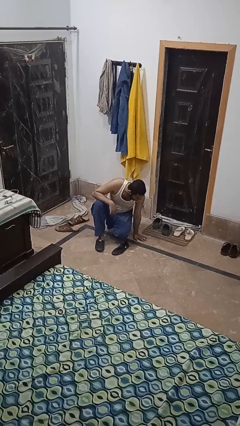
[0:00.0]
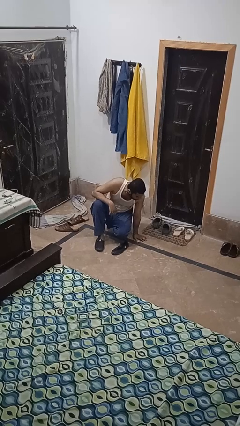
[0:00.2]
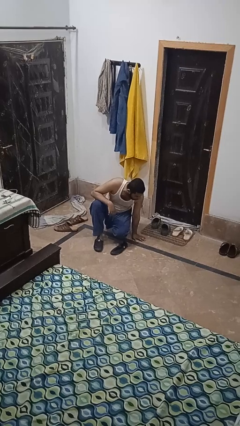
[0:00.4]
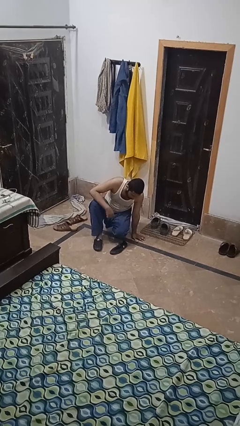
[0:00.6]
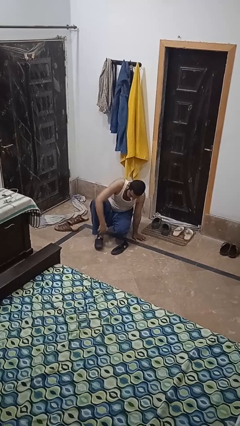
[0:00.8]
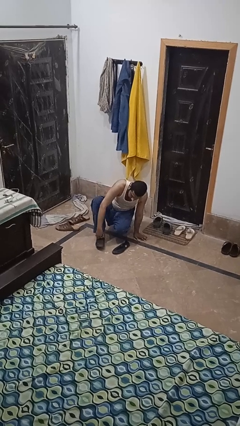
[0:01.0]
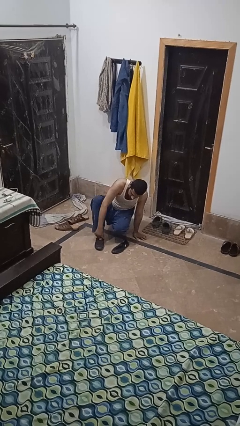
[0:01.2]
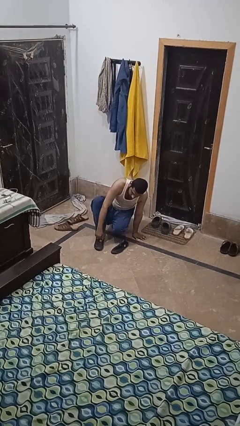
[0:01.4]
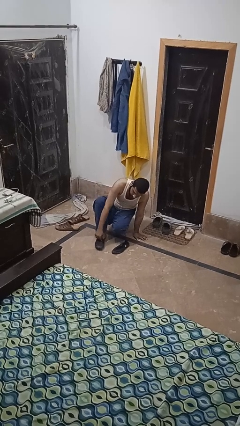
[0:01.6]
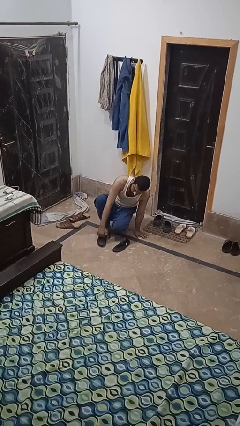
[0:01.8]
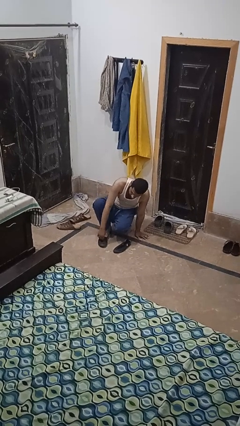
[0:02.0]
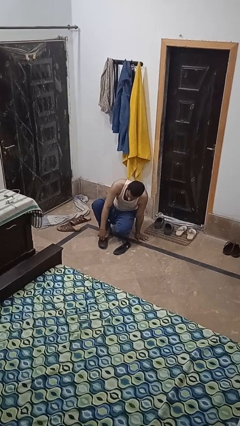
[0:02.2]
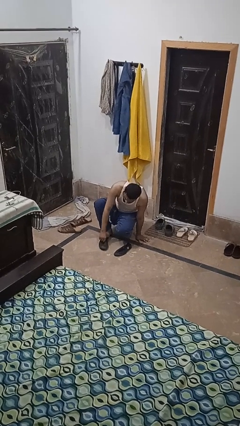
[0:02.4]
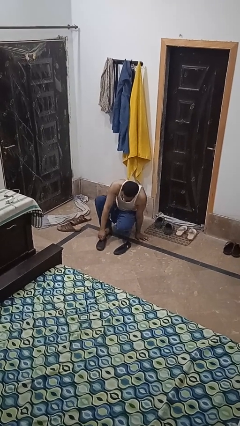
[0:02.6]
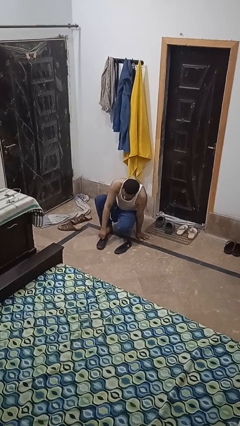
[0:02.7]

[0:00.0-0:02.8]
person takes off shoes

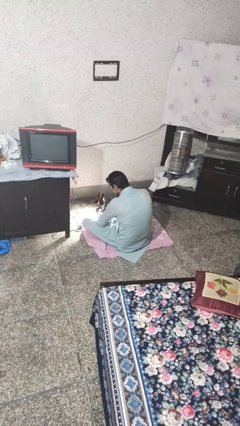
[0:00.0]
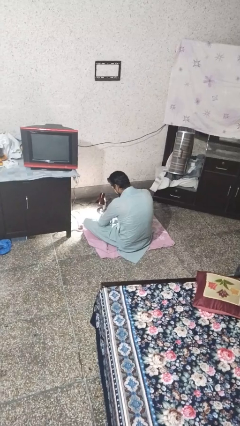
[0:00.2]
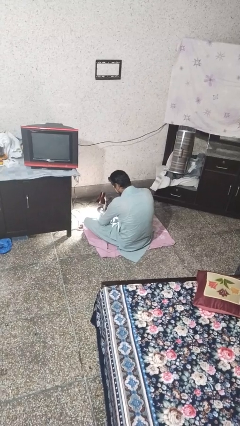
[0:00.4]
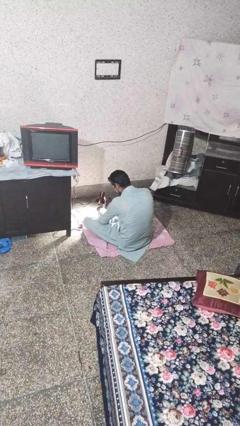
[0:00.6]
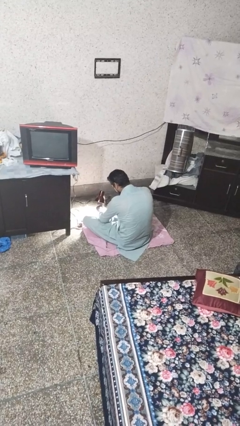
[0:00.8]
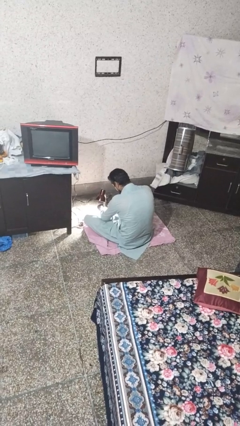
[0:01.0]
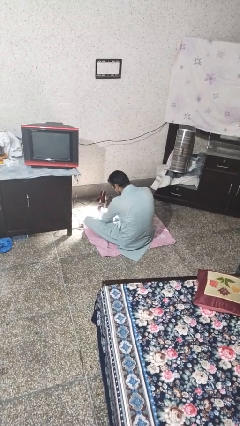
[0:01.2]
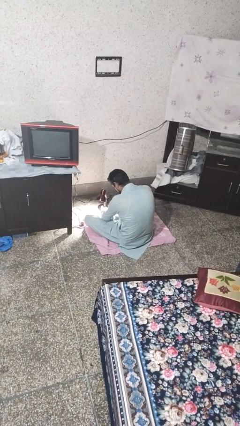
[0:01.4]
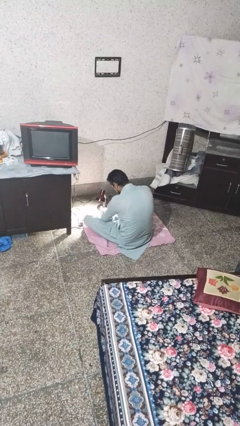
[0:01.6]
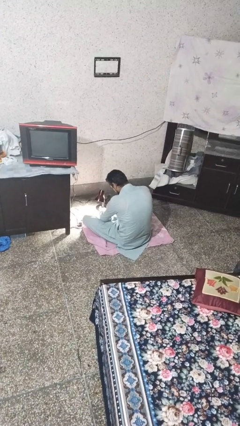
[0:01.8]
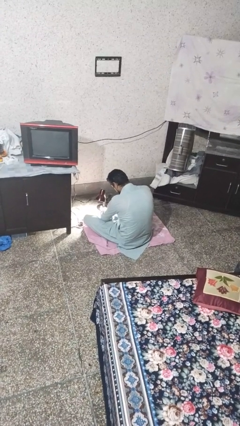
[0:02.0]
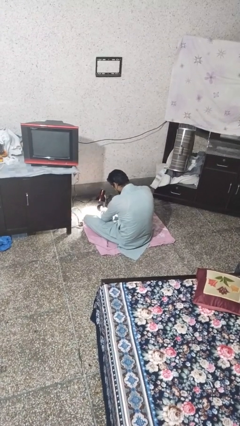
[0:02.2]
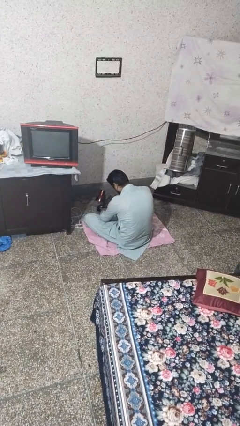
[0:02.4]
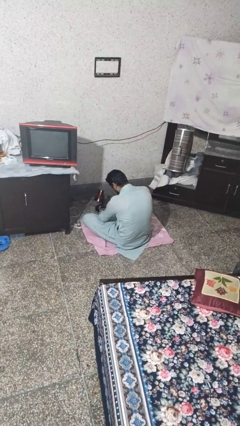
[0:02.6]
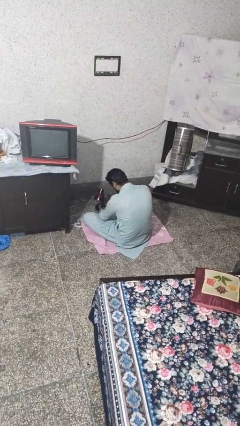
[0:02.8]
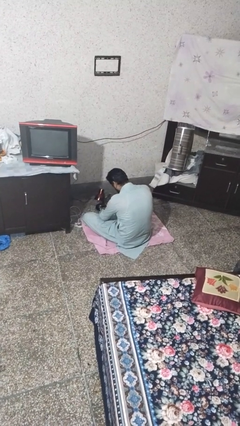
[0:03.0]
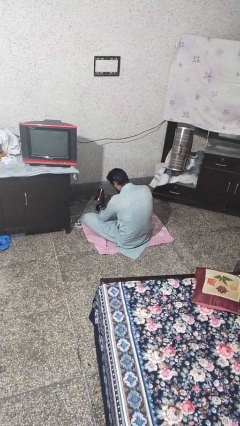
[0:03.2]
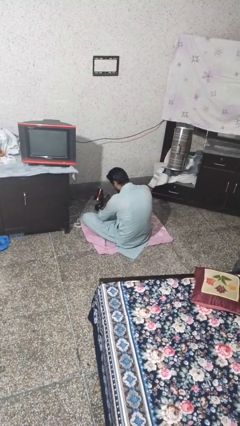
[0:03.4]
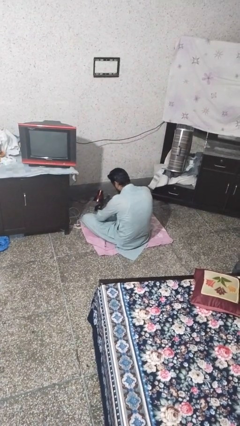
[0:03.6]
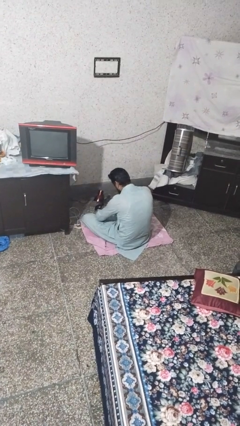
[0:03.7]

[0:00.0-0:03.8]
person turns off lamp

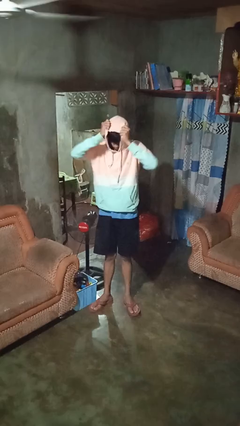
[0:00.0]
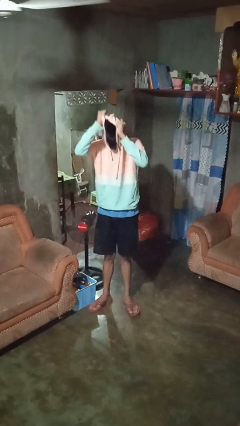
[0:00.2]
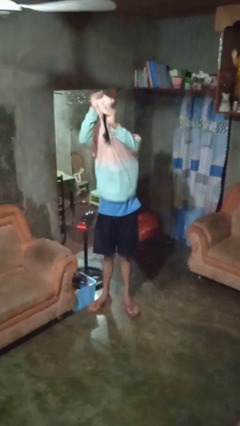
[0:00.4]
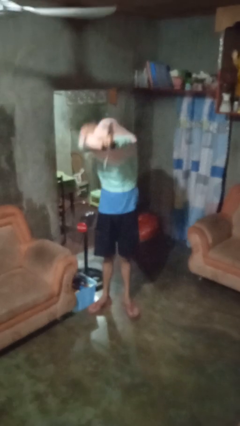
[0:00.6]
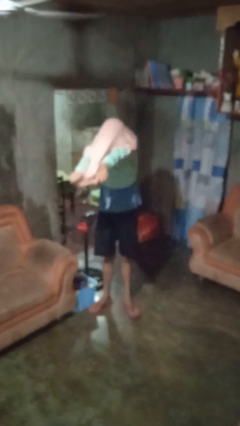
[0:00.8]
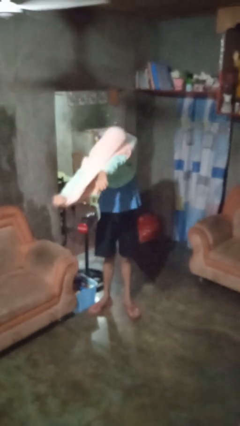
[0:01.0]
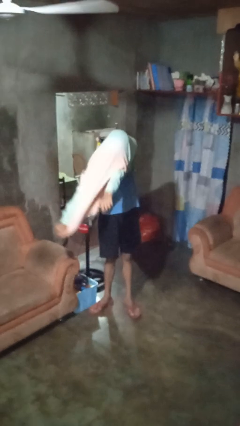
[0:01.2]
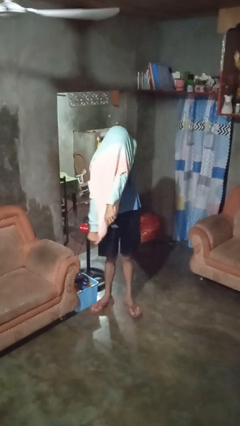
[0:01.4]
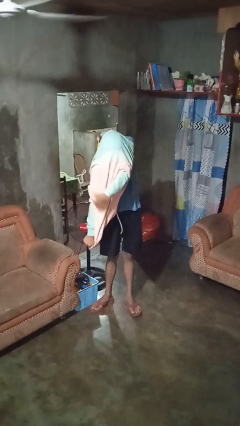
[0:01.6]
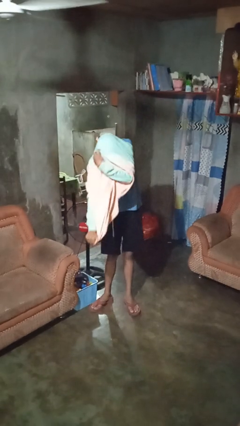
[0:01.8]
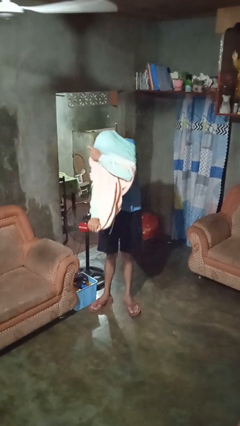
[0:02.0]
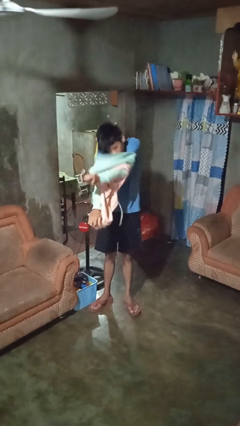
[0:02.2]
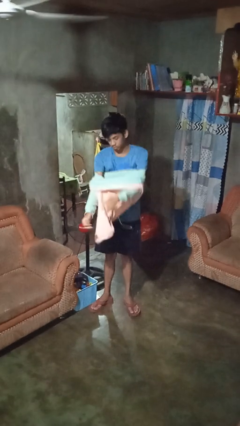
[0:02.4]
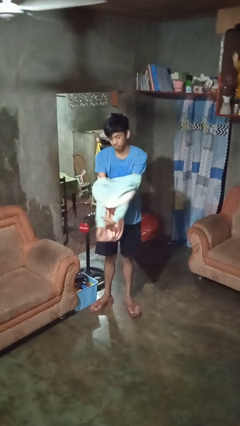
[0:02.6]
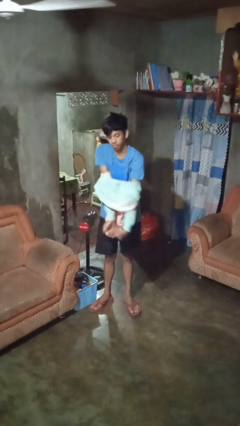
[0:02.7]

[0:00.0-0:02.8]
person takes off hoodie

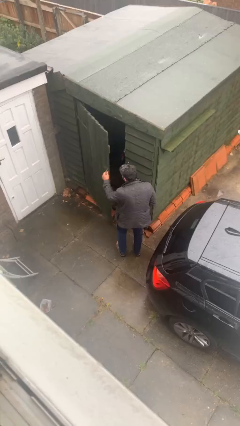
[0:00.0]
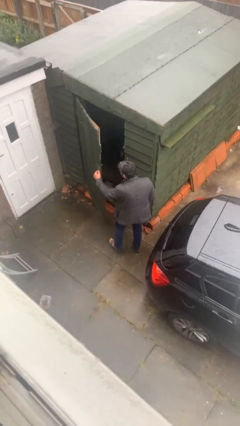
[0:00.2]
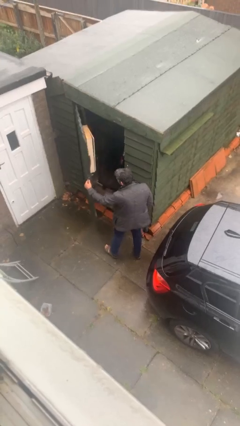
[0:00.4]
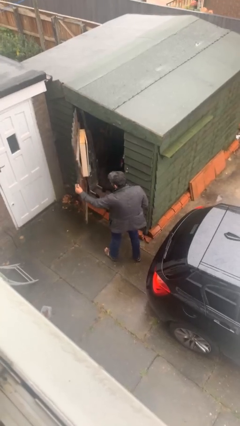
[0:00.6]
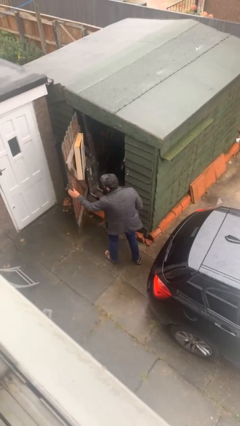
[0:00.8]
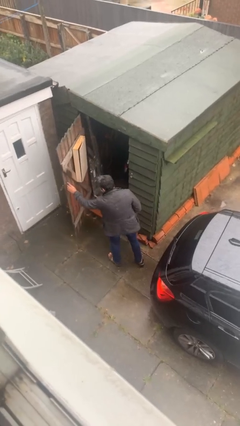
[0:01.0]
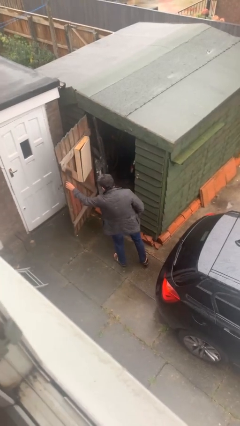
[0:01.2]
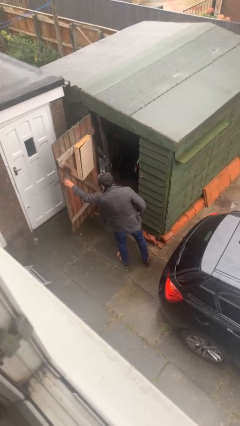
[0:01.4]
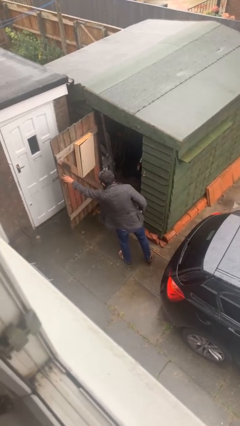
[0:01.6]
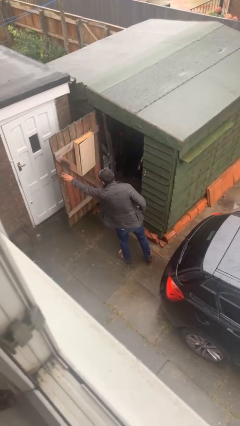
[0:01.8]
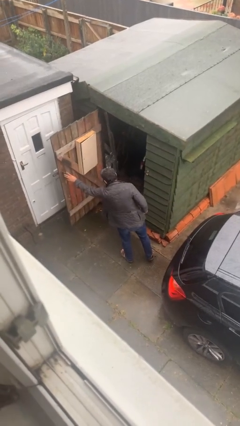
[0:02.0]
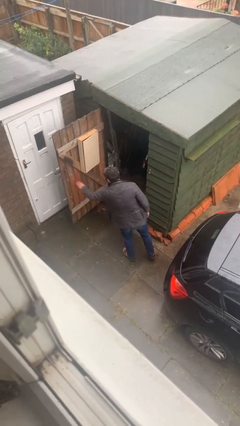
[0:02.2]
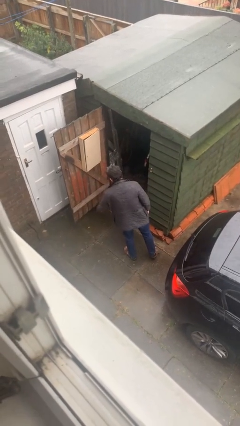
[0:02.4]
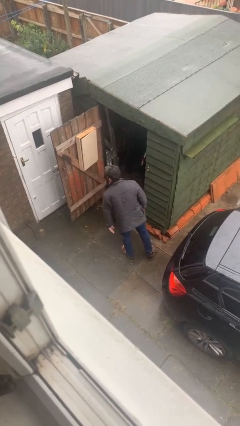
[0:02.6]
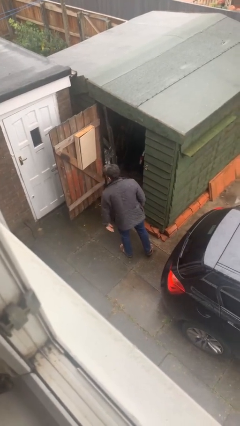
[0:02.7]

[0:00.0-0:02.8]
person opens facility door

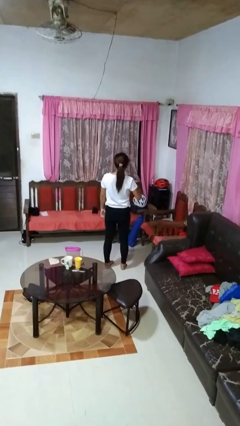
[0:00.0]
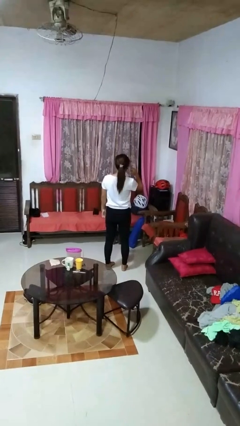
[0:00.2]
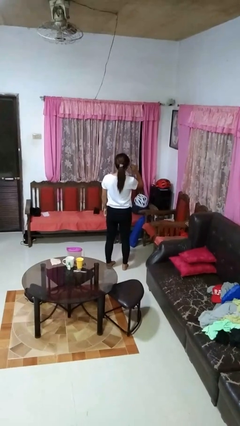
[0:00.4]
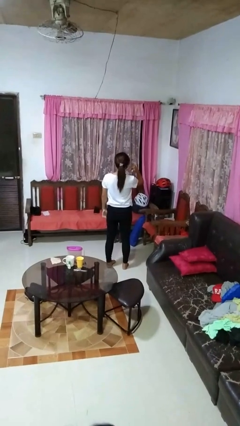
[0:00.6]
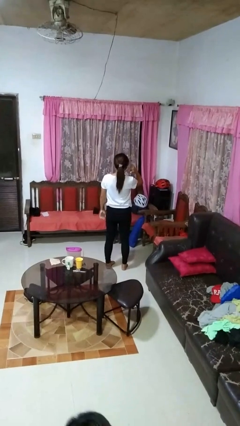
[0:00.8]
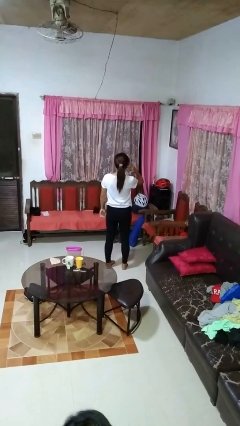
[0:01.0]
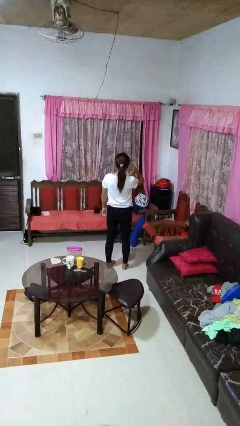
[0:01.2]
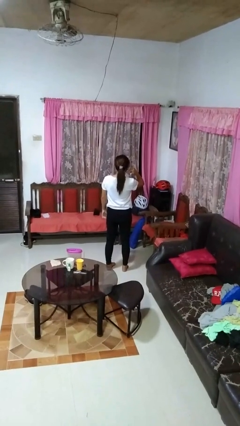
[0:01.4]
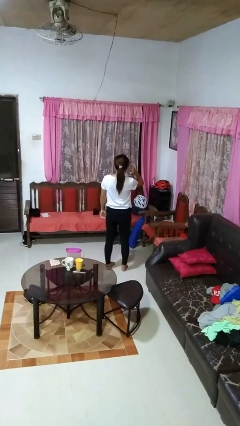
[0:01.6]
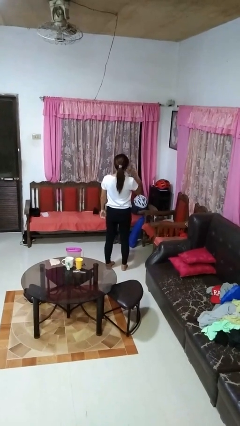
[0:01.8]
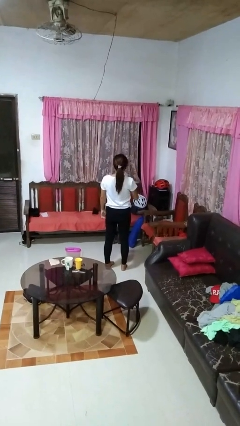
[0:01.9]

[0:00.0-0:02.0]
person gestures behind me

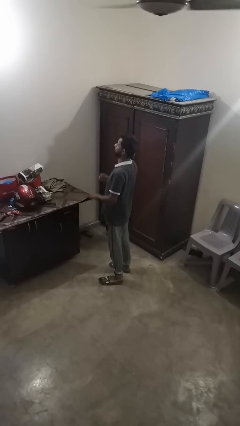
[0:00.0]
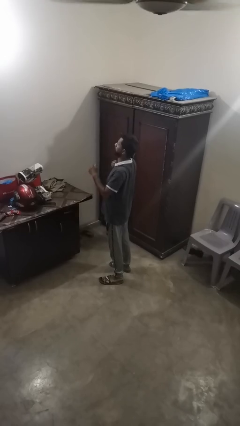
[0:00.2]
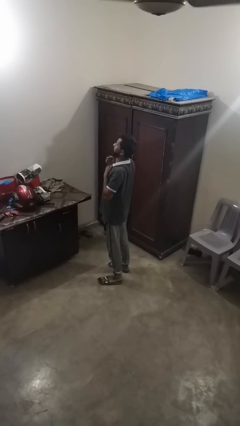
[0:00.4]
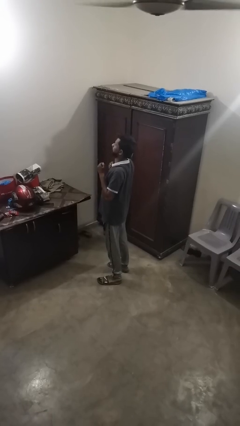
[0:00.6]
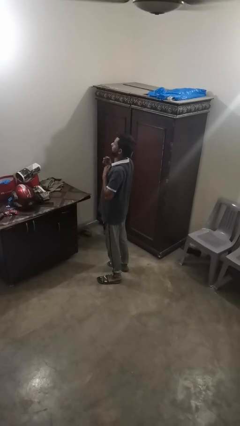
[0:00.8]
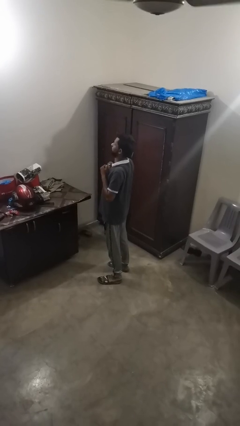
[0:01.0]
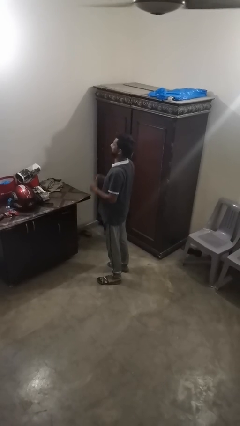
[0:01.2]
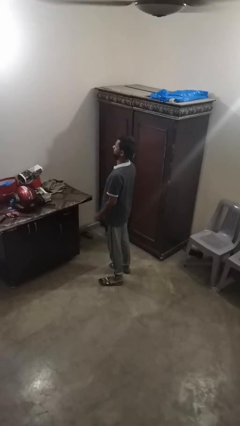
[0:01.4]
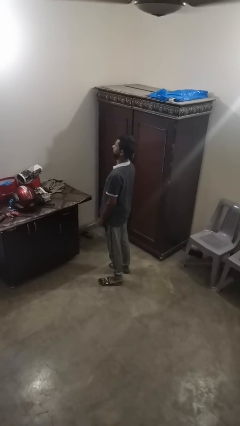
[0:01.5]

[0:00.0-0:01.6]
person drums on chest

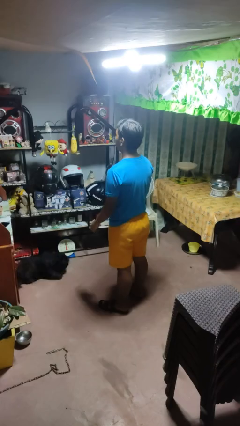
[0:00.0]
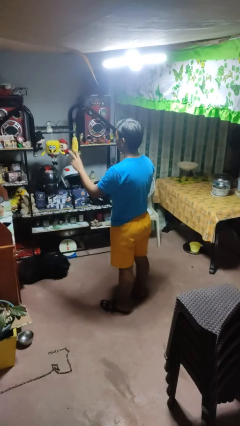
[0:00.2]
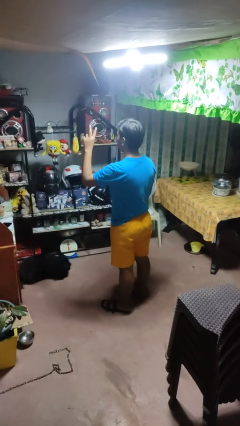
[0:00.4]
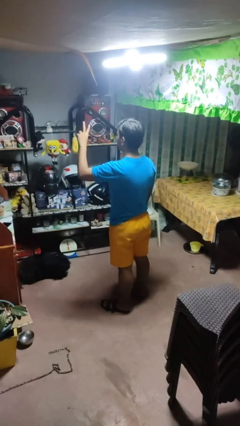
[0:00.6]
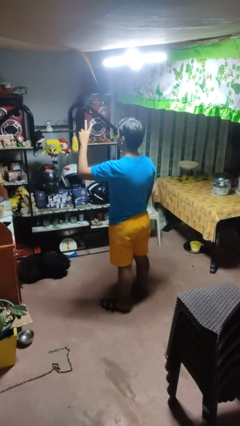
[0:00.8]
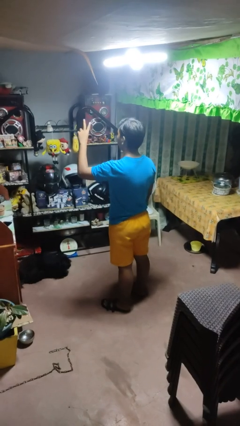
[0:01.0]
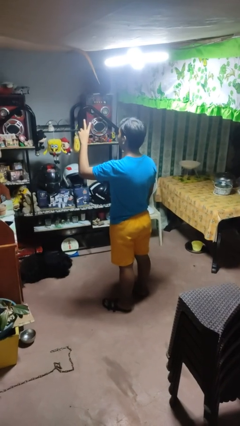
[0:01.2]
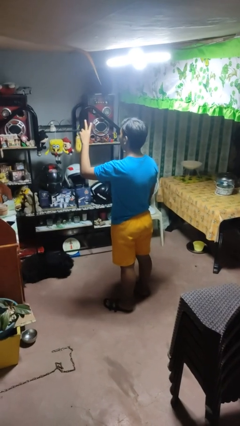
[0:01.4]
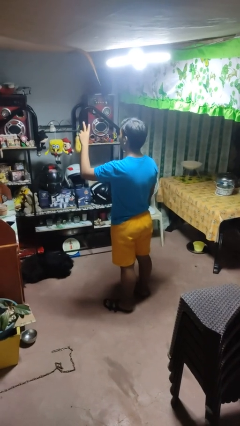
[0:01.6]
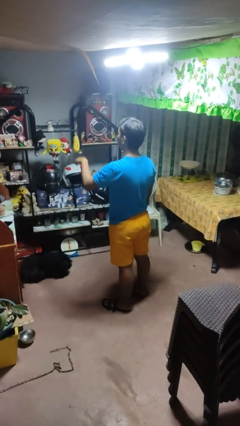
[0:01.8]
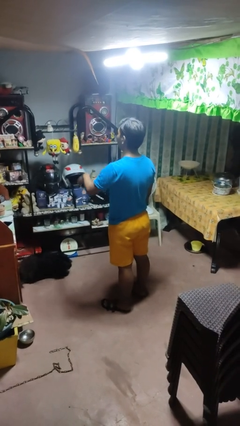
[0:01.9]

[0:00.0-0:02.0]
person gestures peace
